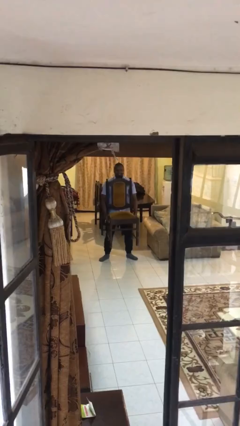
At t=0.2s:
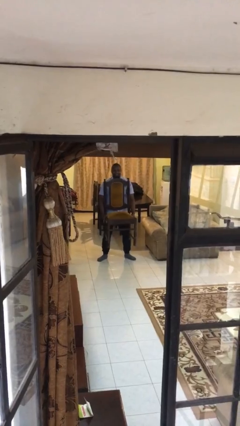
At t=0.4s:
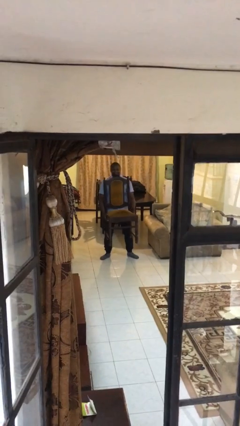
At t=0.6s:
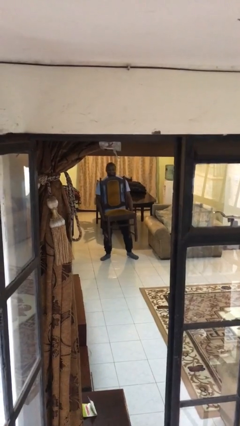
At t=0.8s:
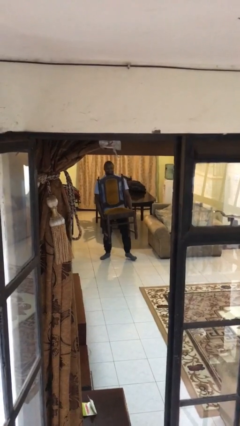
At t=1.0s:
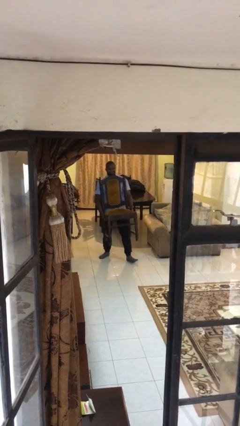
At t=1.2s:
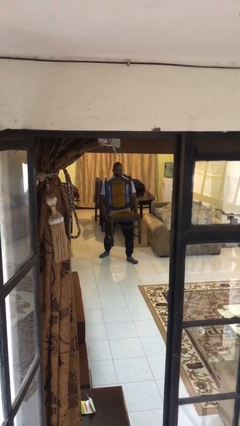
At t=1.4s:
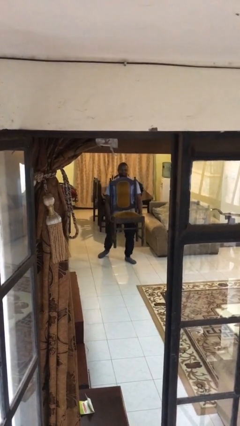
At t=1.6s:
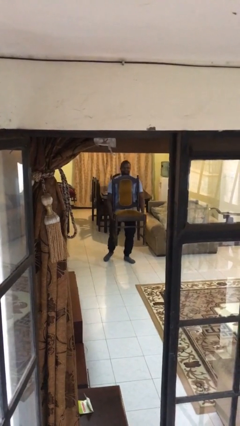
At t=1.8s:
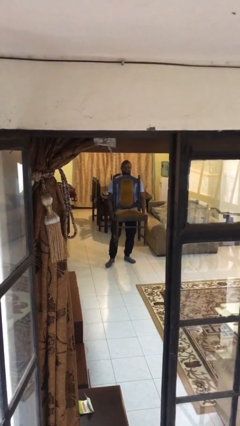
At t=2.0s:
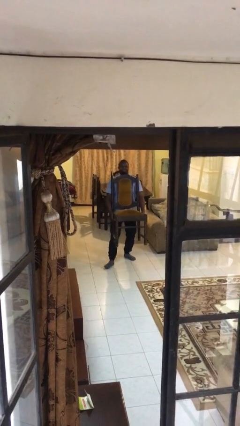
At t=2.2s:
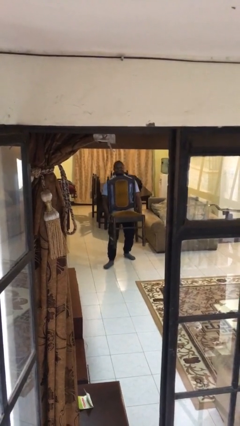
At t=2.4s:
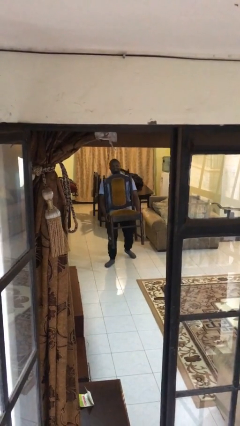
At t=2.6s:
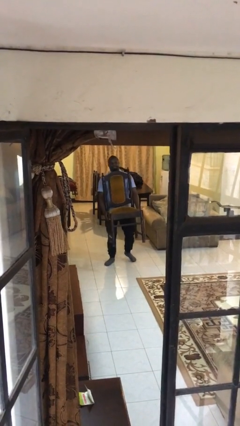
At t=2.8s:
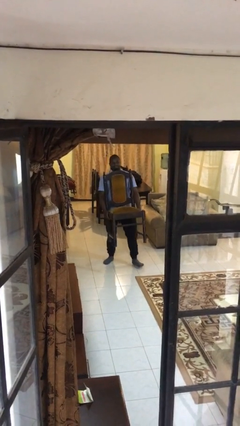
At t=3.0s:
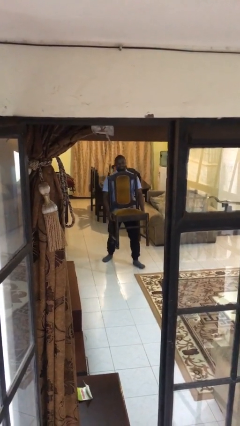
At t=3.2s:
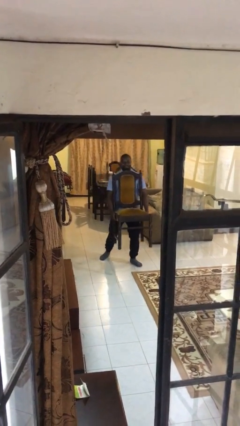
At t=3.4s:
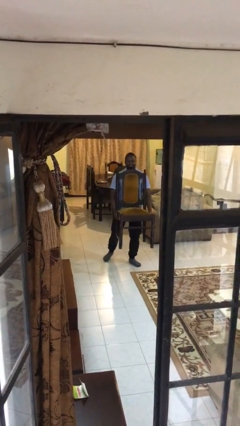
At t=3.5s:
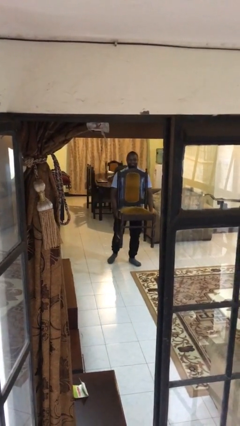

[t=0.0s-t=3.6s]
person carries heavy object

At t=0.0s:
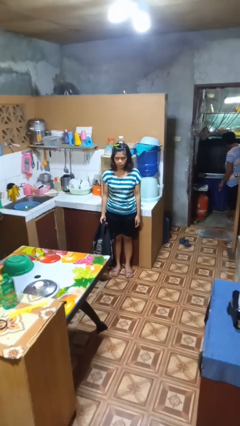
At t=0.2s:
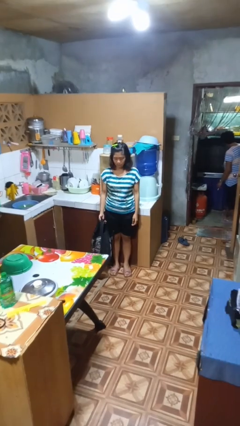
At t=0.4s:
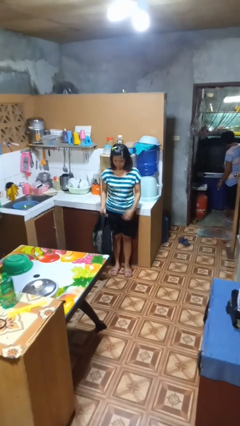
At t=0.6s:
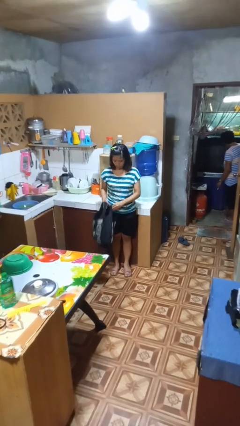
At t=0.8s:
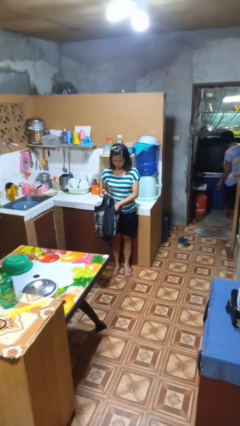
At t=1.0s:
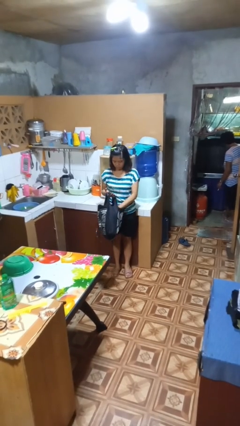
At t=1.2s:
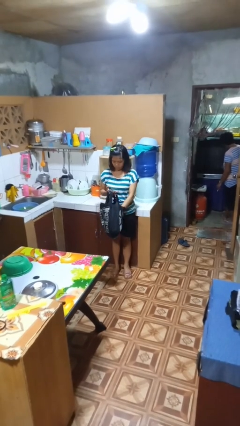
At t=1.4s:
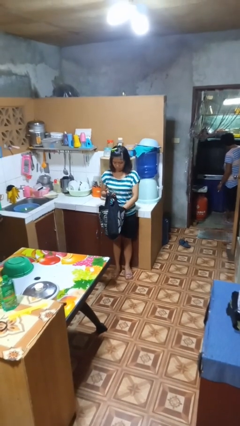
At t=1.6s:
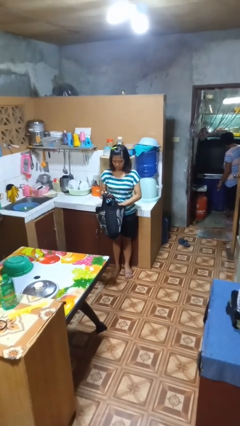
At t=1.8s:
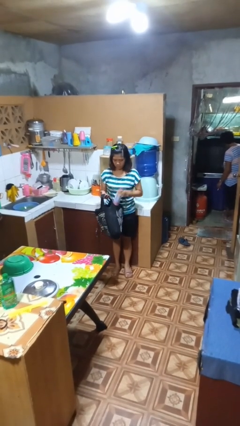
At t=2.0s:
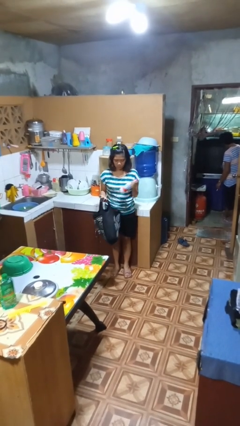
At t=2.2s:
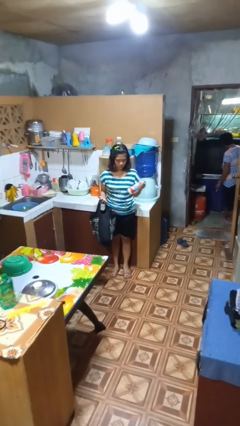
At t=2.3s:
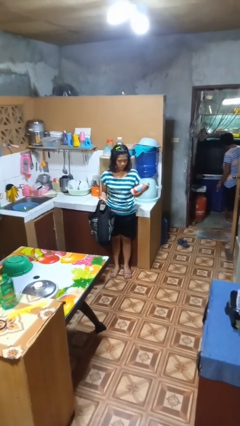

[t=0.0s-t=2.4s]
person takes object from bag

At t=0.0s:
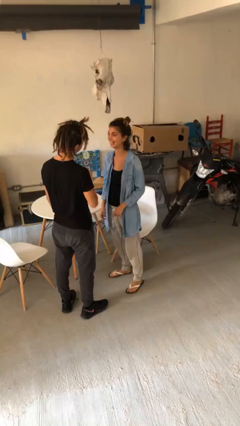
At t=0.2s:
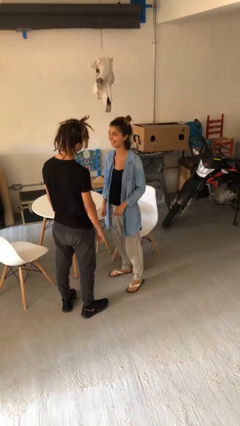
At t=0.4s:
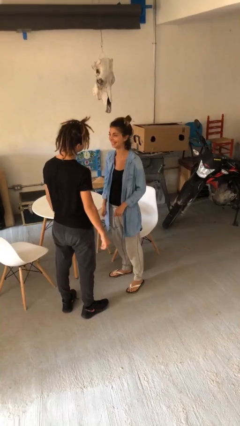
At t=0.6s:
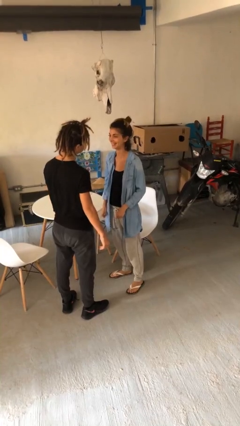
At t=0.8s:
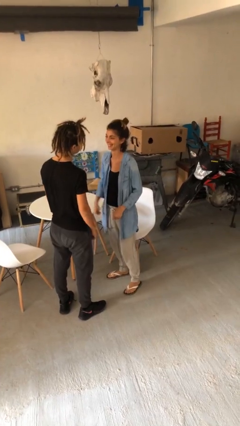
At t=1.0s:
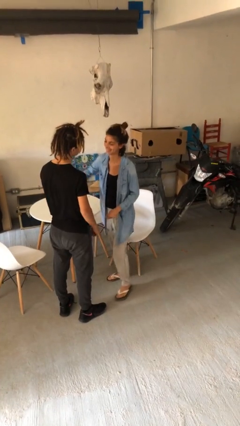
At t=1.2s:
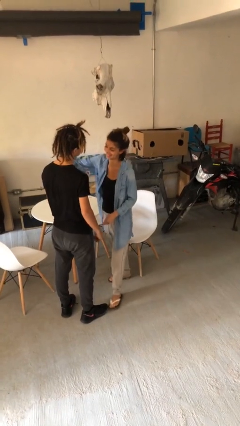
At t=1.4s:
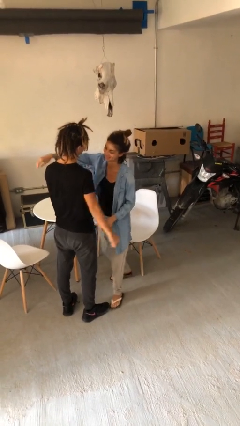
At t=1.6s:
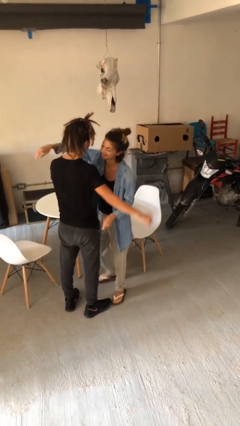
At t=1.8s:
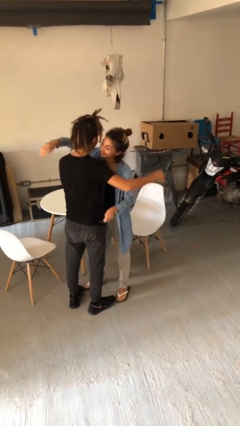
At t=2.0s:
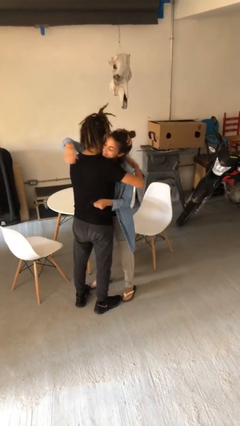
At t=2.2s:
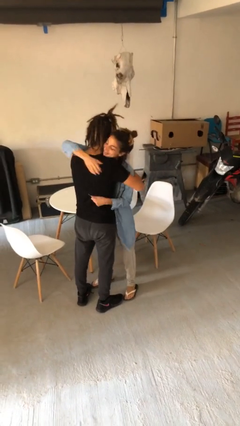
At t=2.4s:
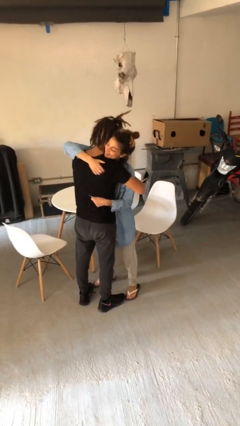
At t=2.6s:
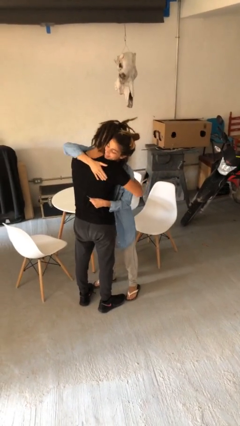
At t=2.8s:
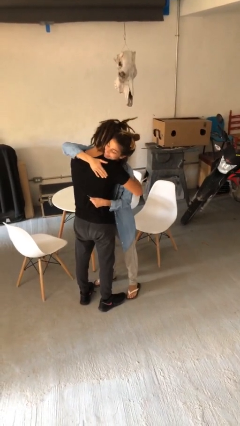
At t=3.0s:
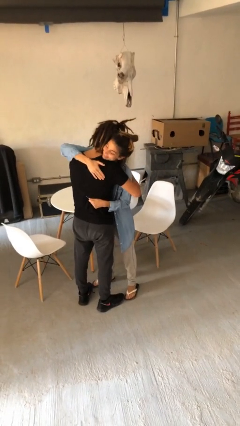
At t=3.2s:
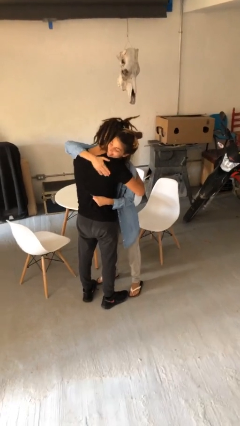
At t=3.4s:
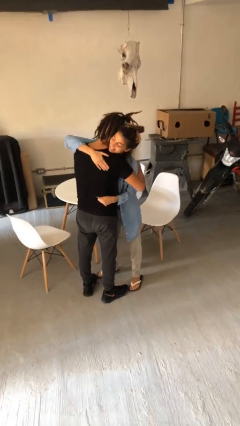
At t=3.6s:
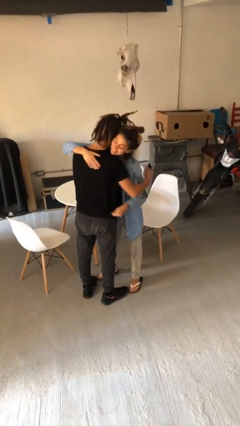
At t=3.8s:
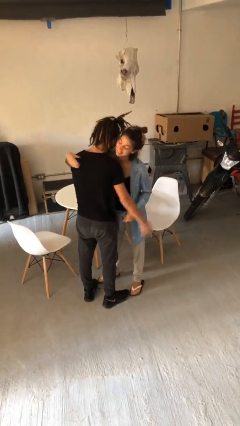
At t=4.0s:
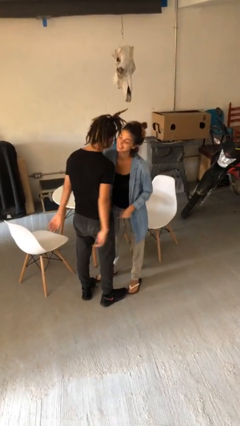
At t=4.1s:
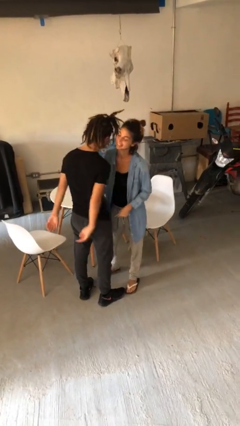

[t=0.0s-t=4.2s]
person embraces person

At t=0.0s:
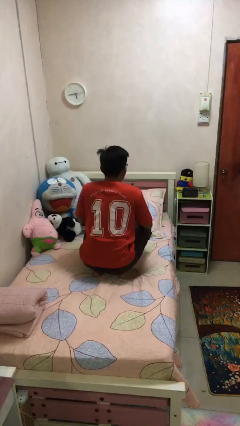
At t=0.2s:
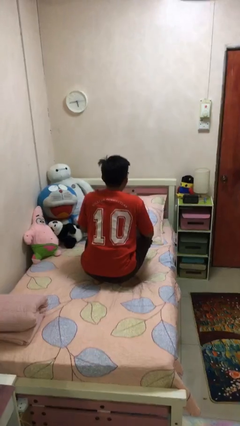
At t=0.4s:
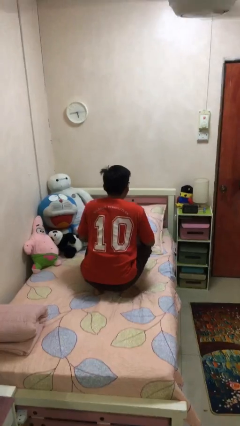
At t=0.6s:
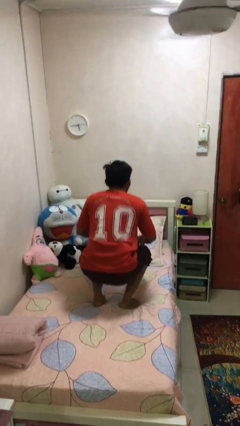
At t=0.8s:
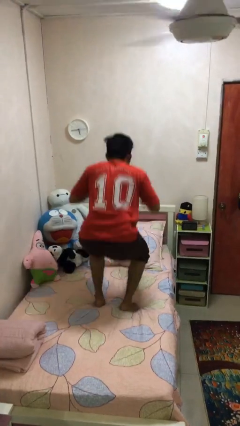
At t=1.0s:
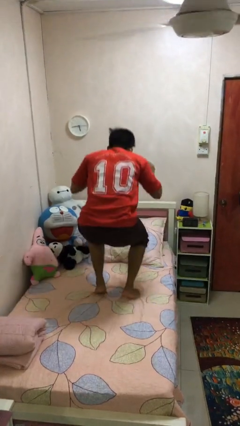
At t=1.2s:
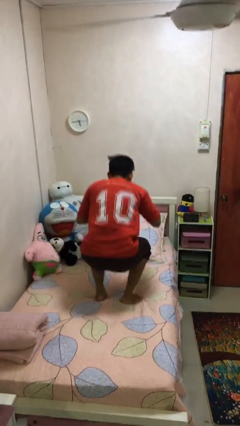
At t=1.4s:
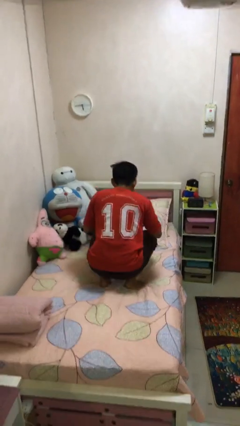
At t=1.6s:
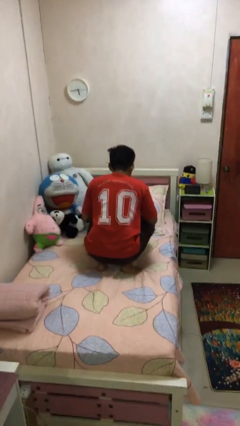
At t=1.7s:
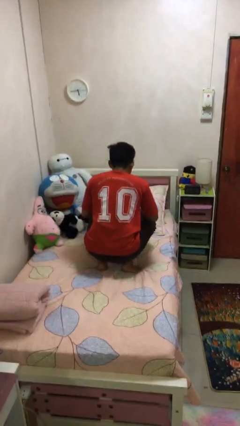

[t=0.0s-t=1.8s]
person jumps on bed

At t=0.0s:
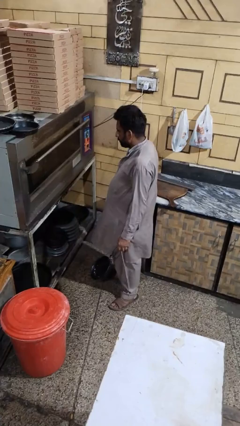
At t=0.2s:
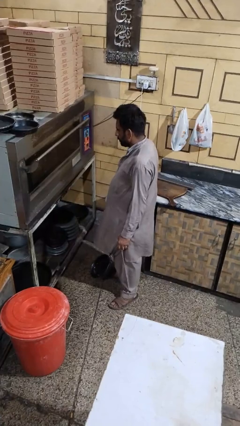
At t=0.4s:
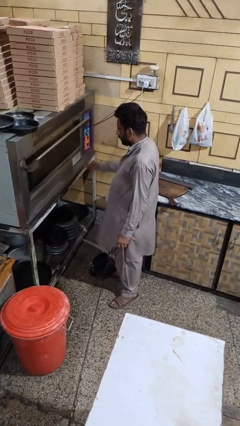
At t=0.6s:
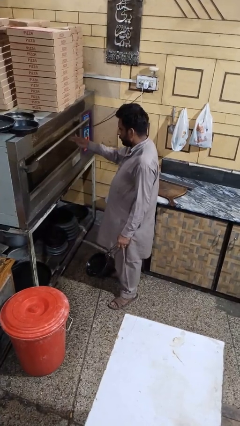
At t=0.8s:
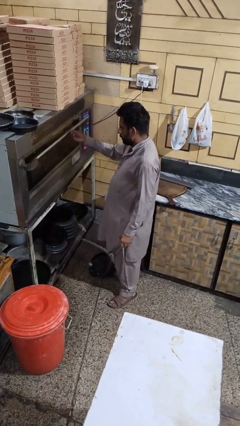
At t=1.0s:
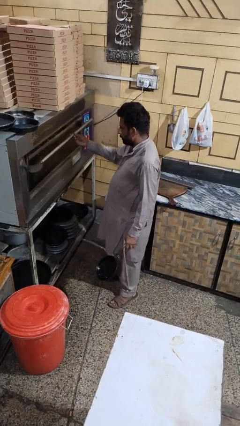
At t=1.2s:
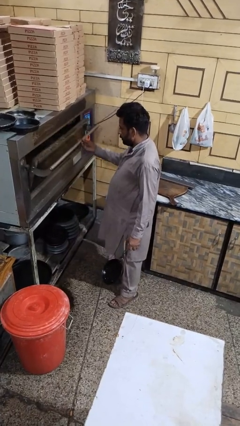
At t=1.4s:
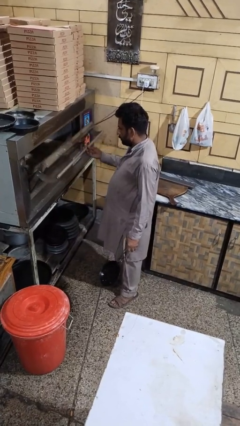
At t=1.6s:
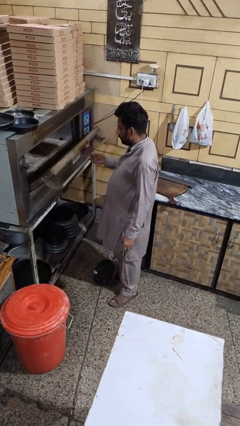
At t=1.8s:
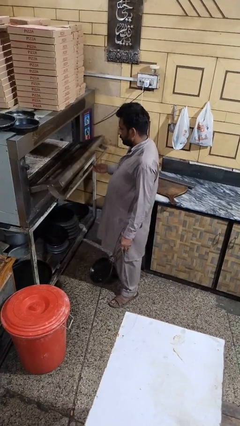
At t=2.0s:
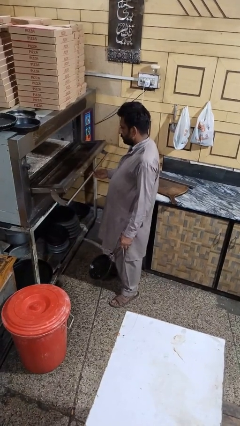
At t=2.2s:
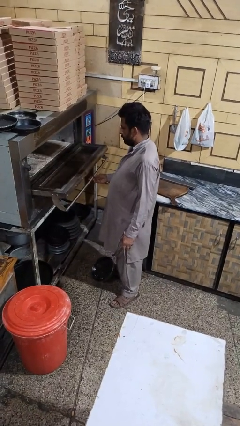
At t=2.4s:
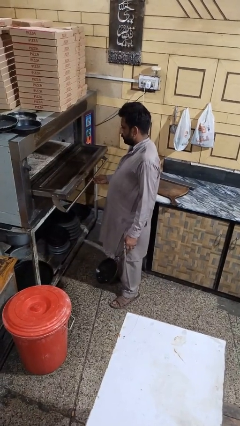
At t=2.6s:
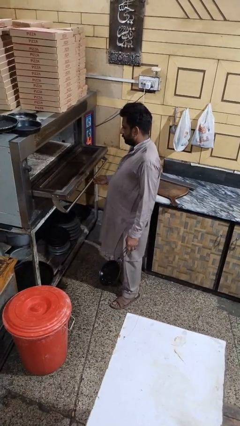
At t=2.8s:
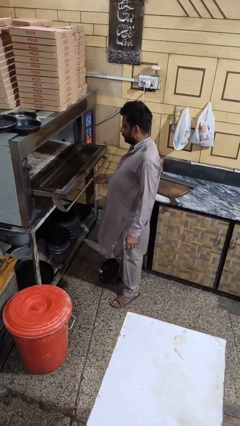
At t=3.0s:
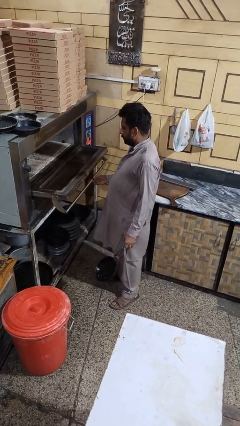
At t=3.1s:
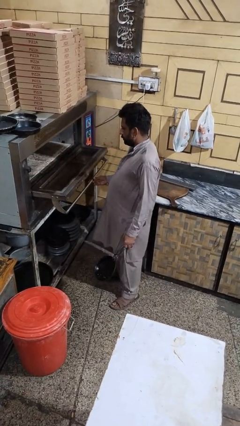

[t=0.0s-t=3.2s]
person opens microwave

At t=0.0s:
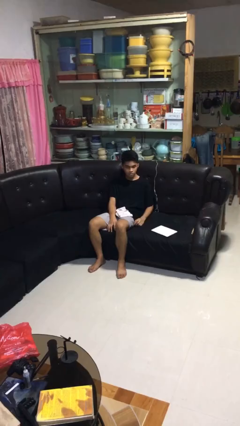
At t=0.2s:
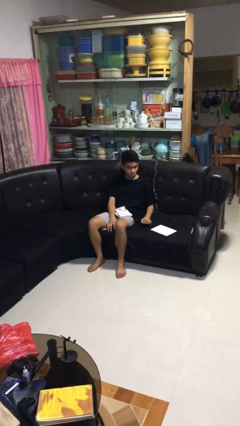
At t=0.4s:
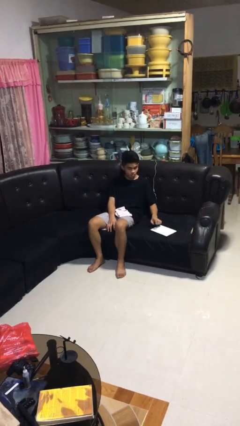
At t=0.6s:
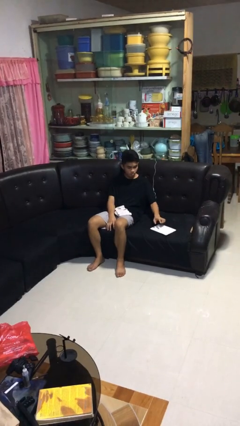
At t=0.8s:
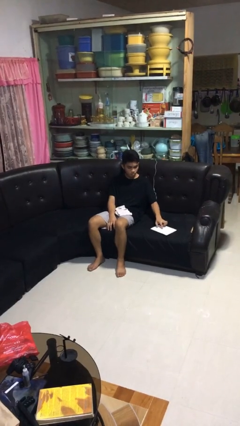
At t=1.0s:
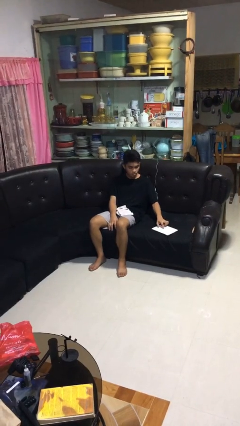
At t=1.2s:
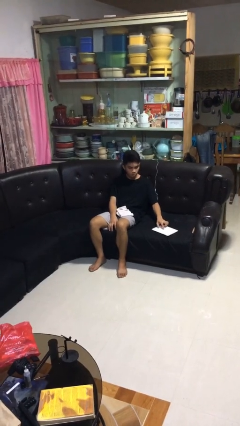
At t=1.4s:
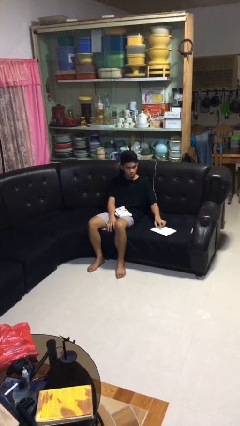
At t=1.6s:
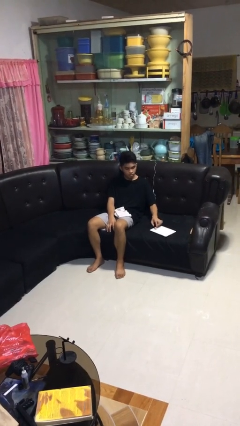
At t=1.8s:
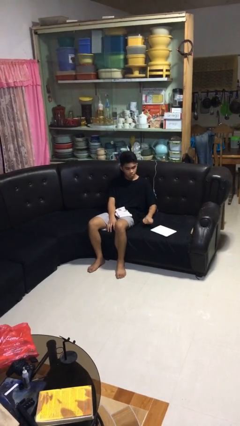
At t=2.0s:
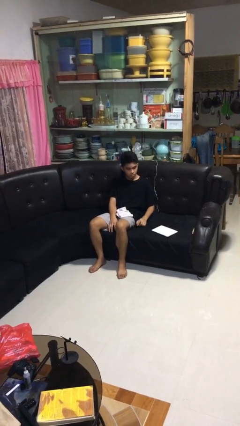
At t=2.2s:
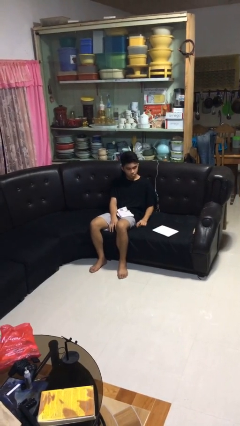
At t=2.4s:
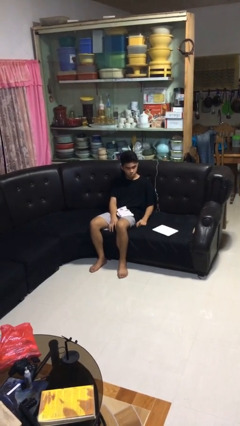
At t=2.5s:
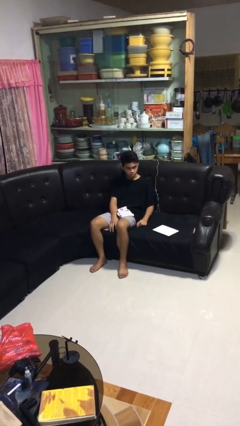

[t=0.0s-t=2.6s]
person taps object with finger
